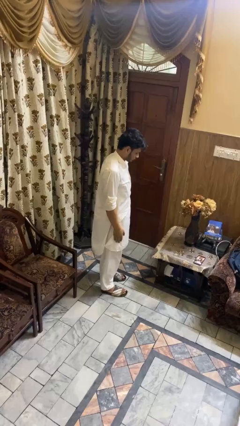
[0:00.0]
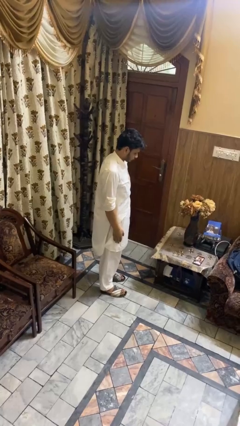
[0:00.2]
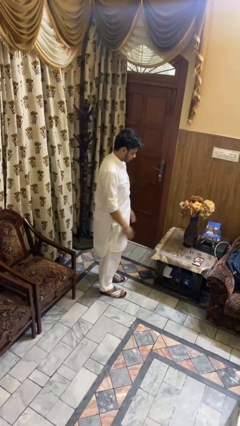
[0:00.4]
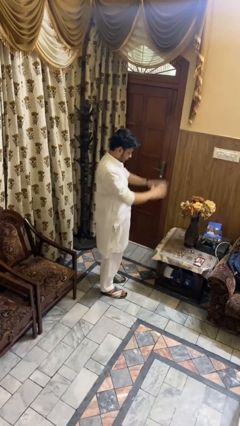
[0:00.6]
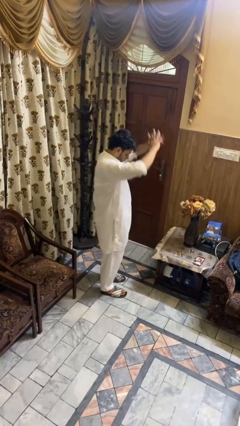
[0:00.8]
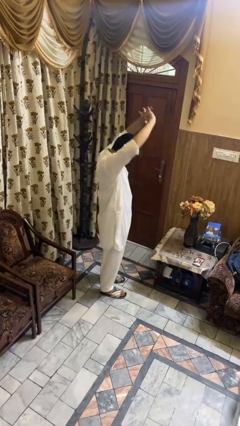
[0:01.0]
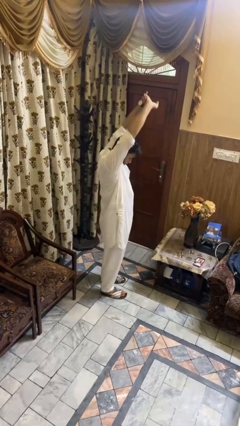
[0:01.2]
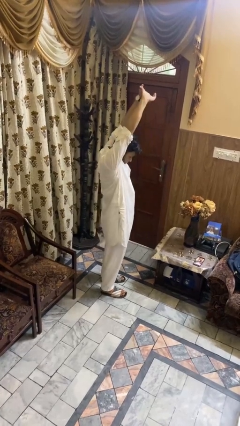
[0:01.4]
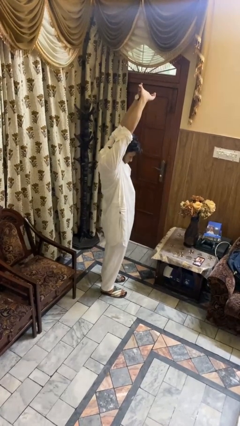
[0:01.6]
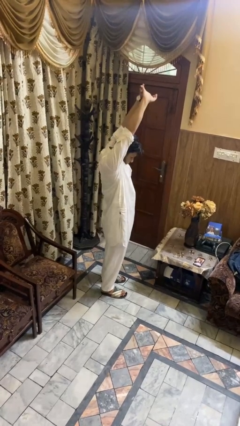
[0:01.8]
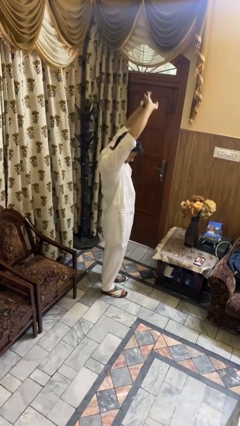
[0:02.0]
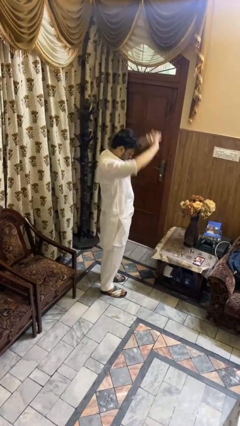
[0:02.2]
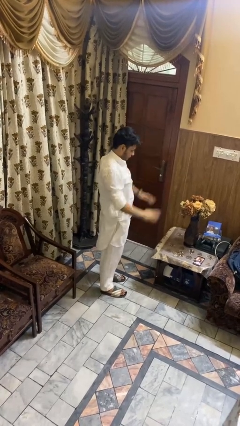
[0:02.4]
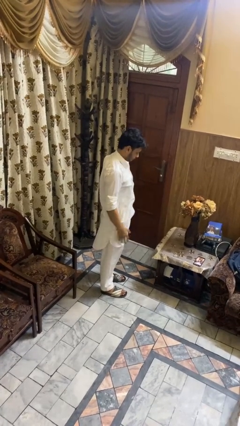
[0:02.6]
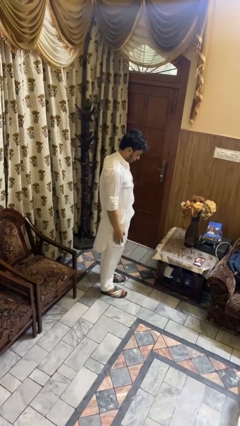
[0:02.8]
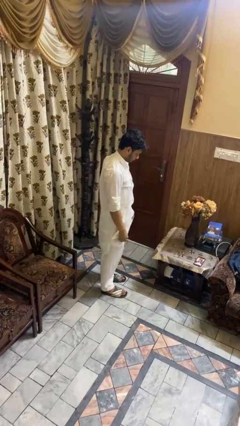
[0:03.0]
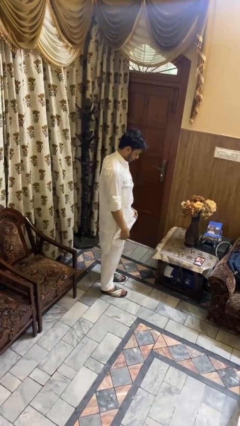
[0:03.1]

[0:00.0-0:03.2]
person stretches arms over head

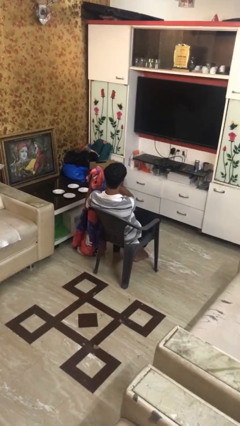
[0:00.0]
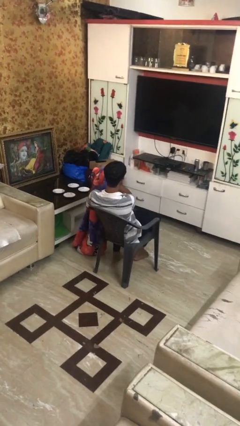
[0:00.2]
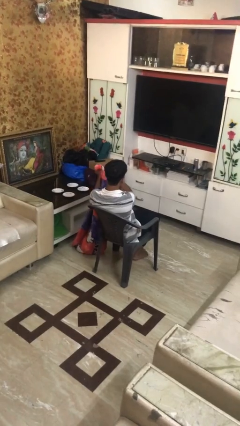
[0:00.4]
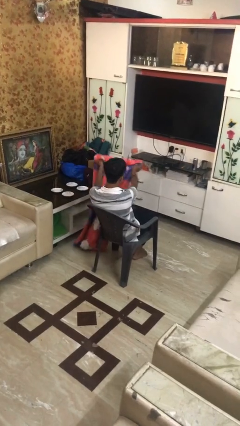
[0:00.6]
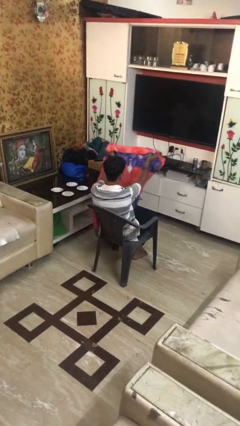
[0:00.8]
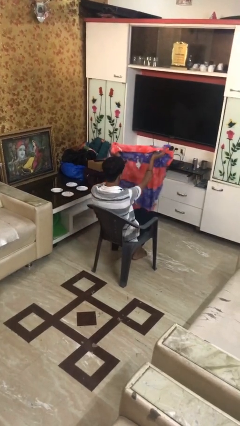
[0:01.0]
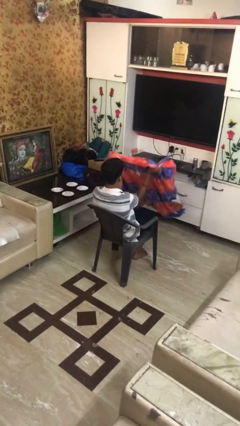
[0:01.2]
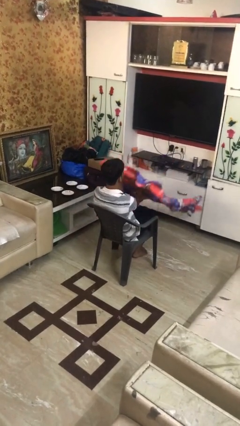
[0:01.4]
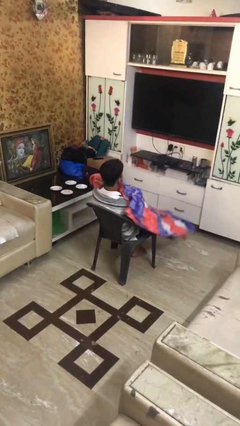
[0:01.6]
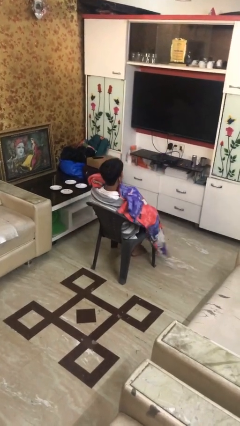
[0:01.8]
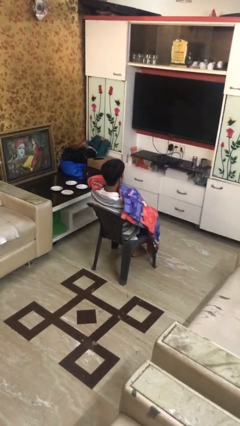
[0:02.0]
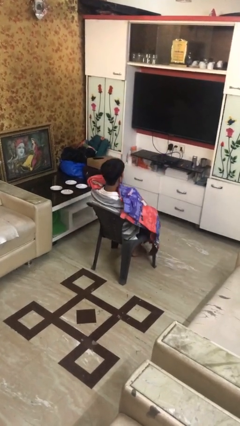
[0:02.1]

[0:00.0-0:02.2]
person covers with blanket

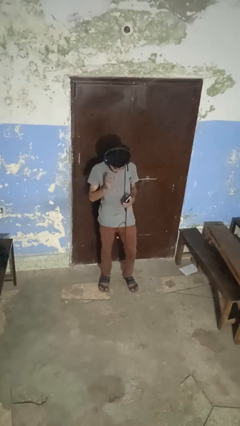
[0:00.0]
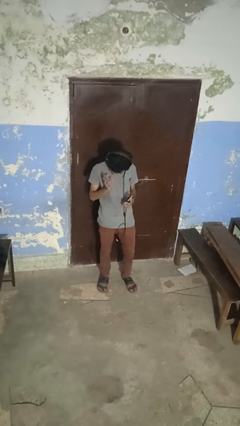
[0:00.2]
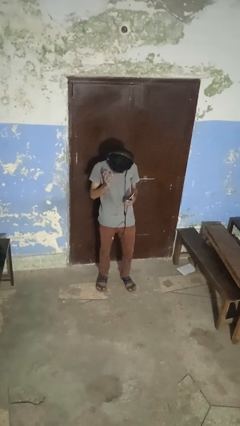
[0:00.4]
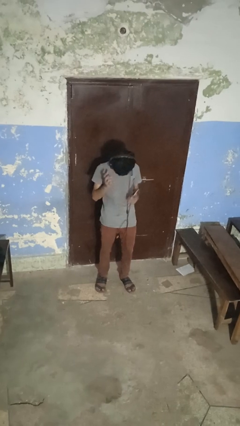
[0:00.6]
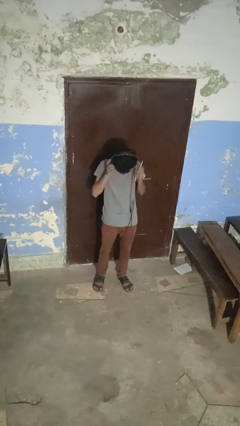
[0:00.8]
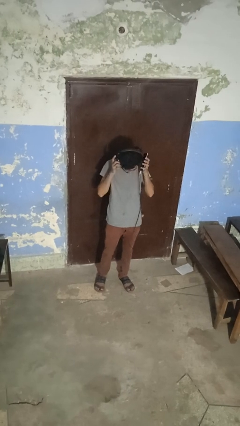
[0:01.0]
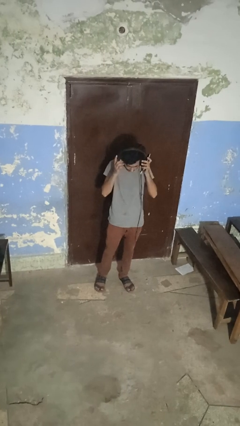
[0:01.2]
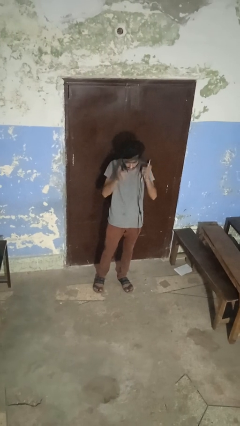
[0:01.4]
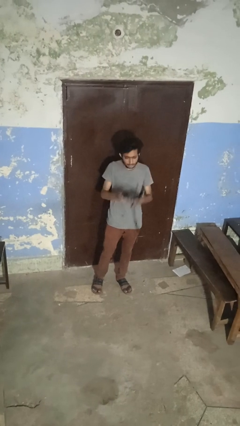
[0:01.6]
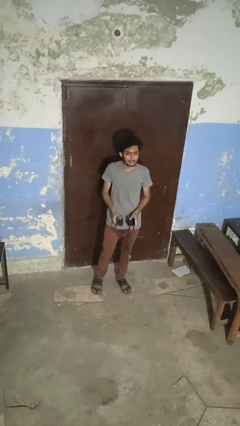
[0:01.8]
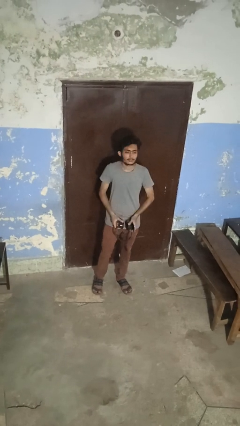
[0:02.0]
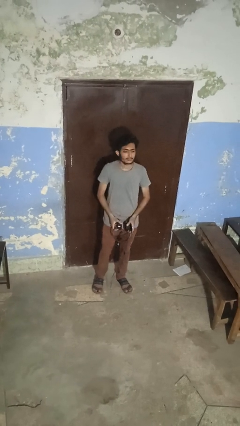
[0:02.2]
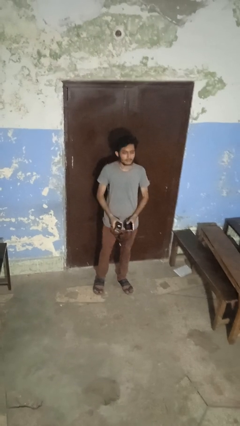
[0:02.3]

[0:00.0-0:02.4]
person takes off headphones

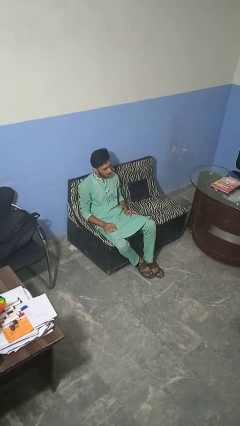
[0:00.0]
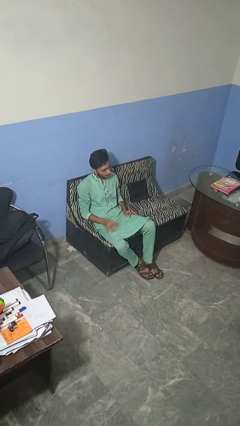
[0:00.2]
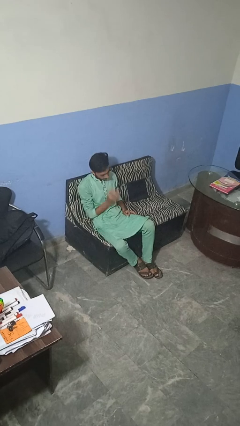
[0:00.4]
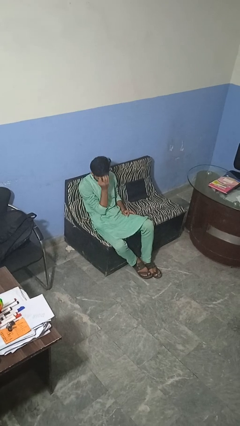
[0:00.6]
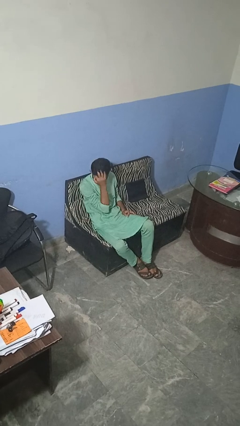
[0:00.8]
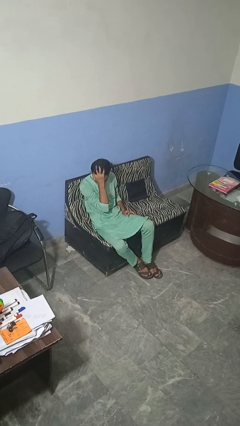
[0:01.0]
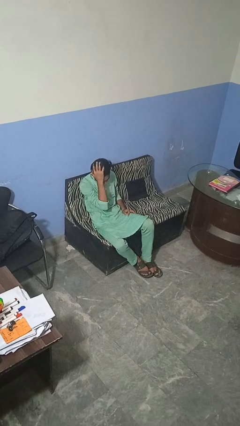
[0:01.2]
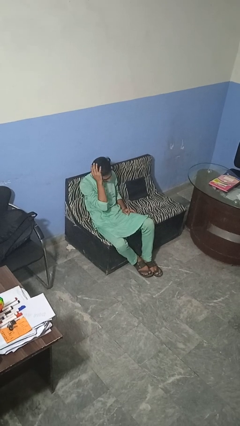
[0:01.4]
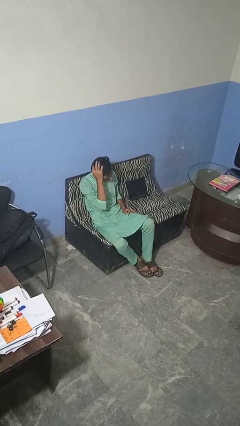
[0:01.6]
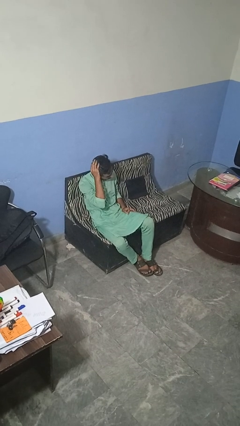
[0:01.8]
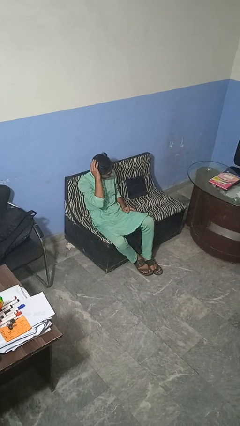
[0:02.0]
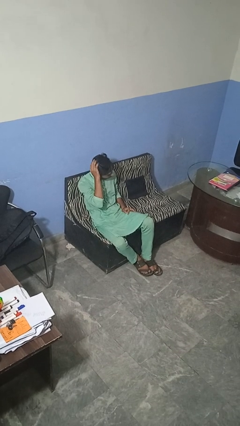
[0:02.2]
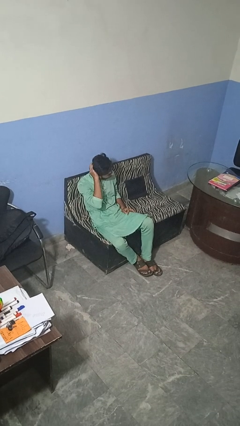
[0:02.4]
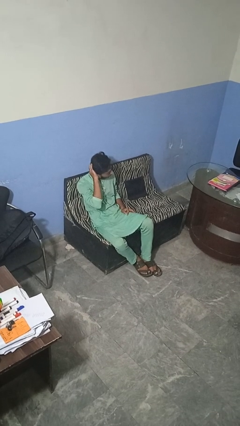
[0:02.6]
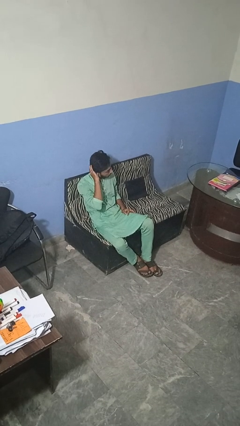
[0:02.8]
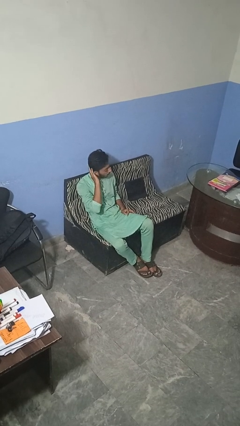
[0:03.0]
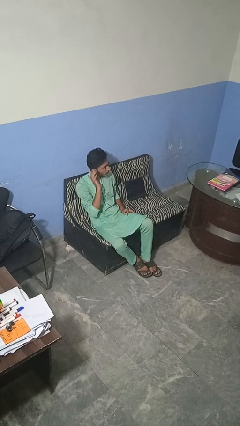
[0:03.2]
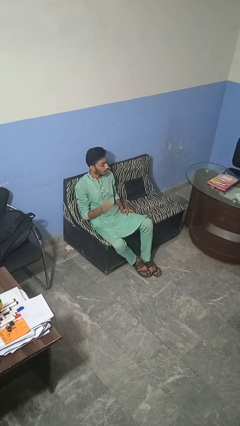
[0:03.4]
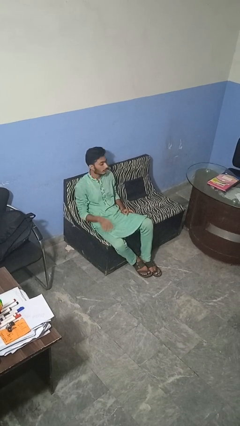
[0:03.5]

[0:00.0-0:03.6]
person strokes hair

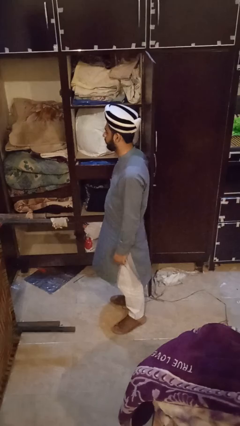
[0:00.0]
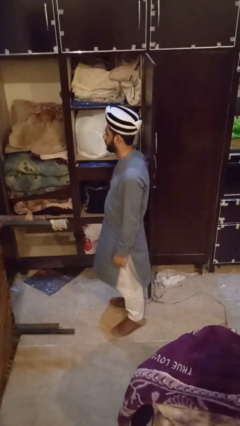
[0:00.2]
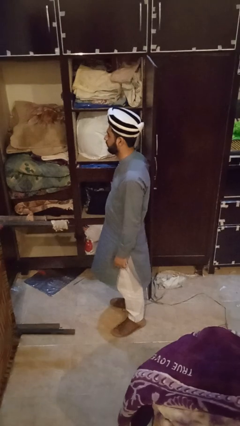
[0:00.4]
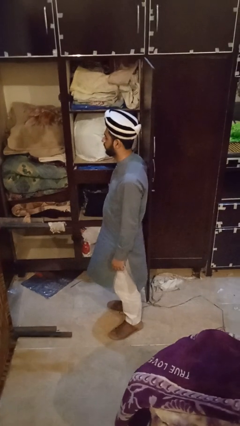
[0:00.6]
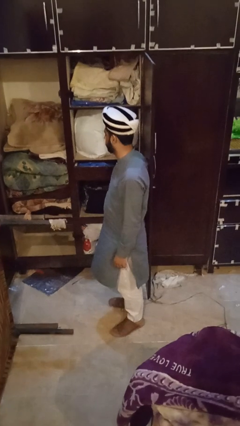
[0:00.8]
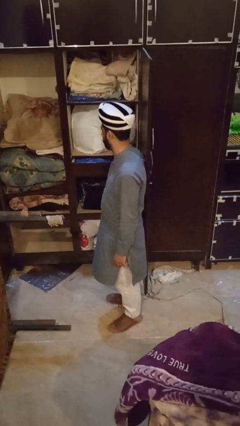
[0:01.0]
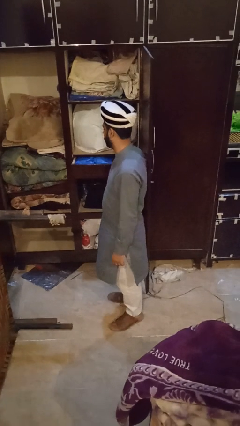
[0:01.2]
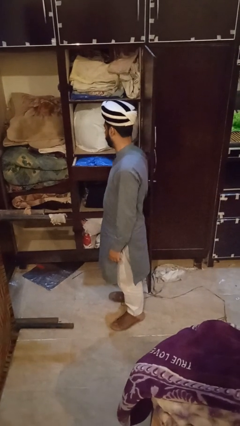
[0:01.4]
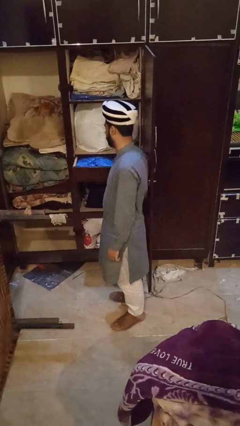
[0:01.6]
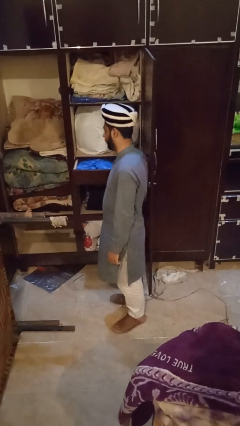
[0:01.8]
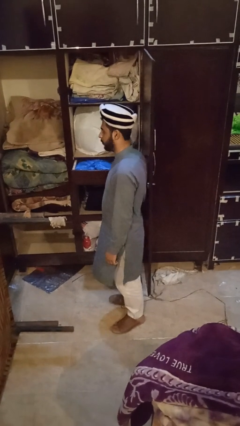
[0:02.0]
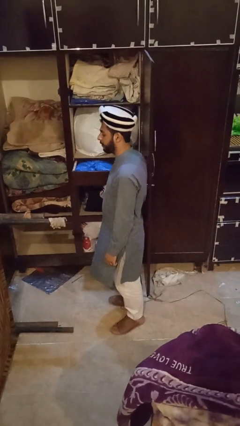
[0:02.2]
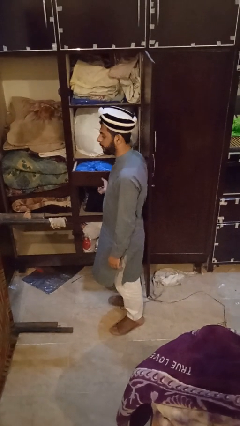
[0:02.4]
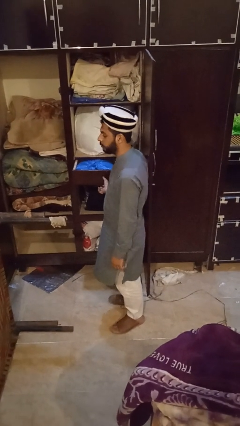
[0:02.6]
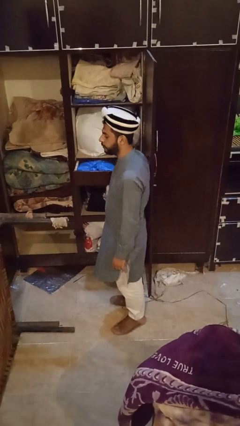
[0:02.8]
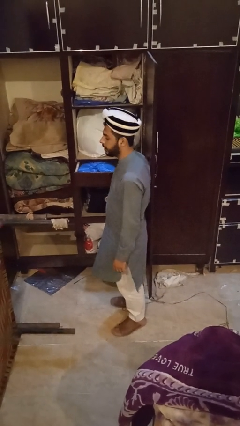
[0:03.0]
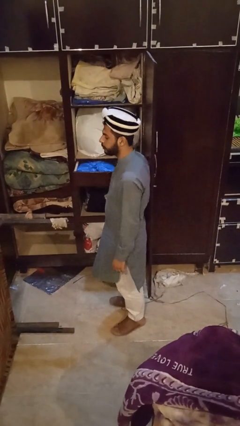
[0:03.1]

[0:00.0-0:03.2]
person opens dresser drawer

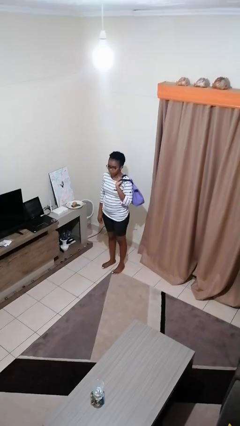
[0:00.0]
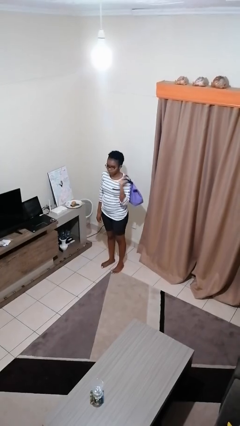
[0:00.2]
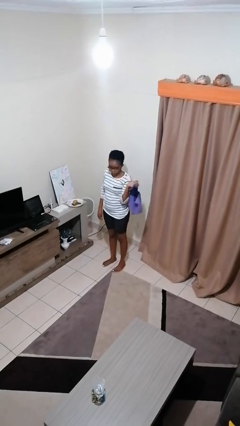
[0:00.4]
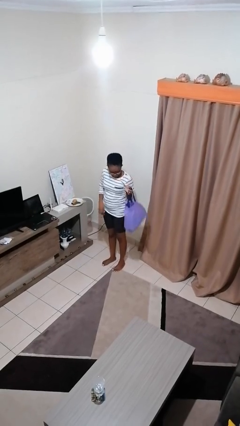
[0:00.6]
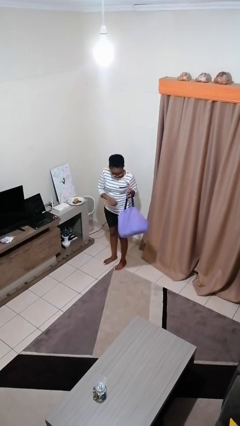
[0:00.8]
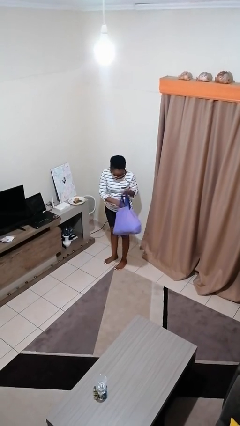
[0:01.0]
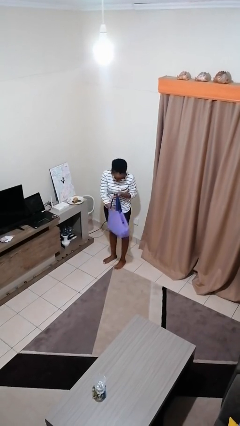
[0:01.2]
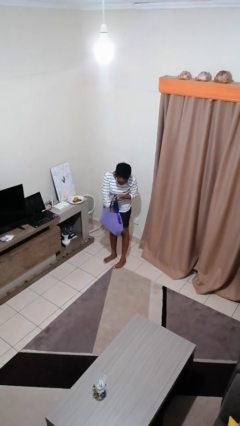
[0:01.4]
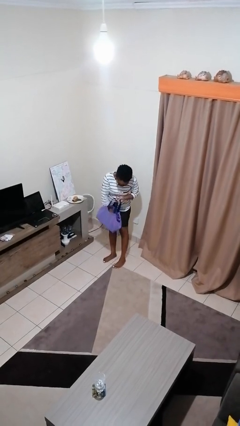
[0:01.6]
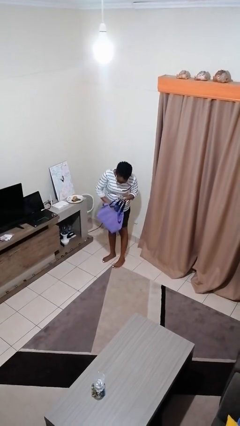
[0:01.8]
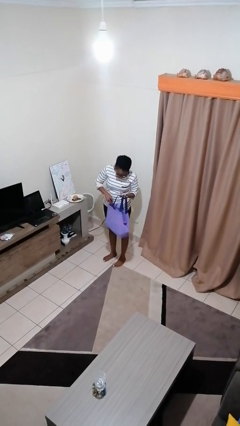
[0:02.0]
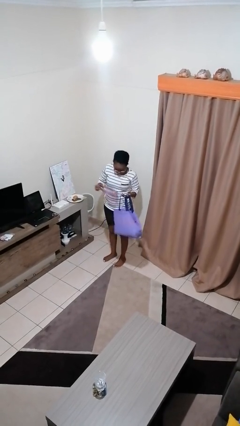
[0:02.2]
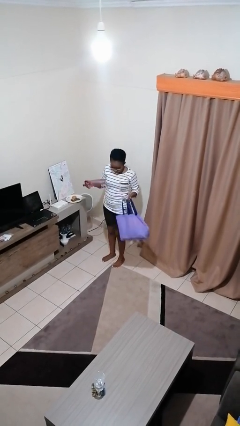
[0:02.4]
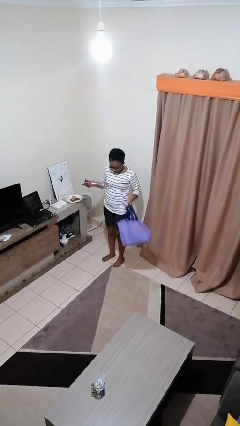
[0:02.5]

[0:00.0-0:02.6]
person takes object from bag
